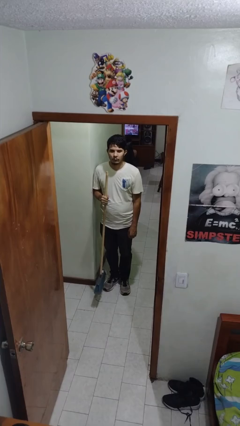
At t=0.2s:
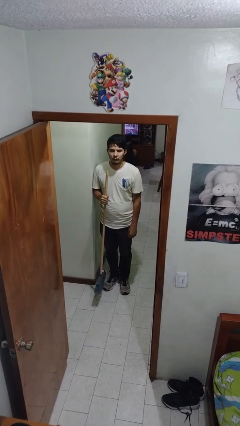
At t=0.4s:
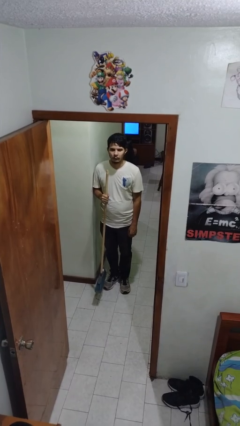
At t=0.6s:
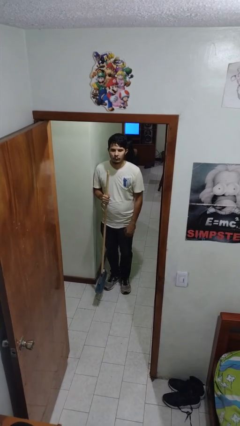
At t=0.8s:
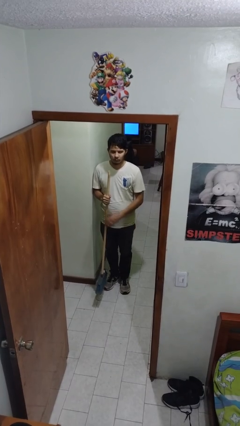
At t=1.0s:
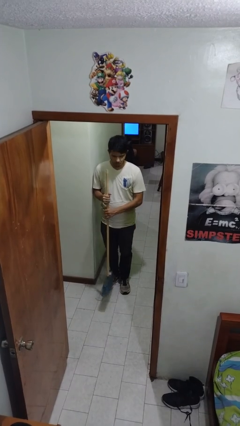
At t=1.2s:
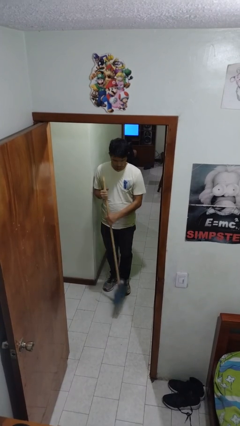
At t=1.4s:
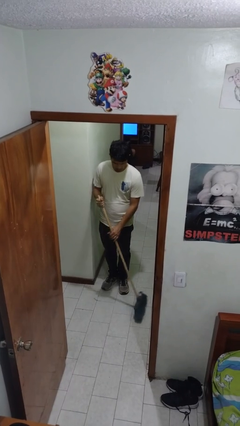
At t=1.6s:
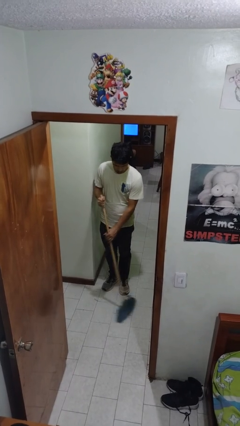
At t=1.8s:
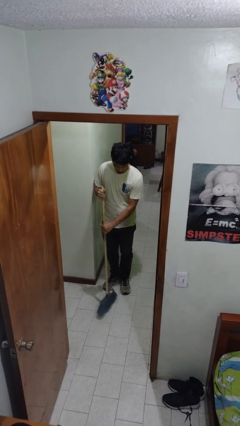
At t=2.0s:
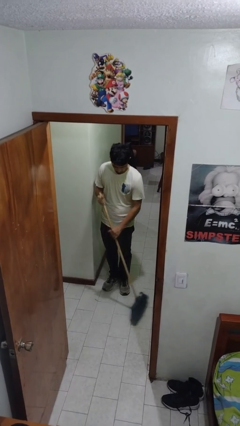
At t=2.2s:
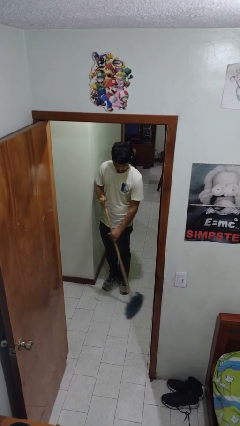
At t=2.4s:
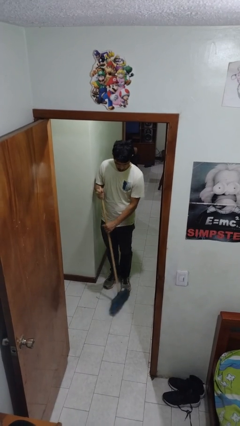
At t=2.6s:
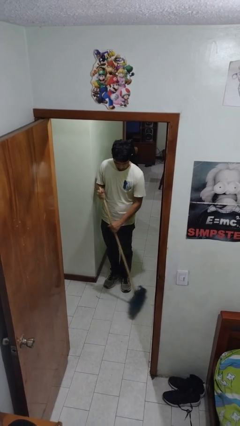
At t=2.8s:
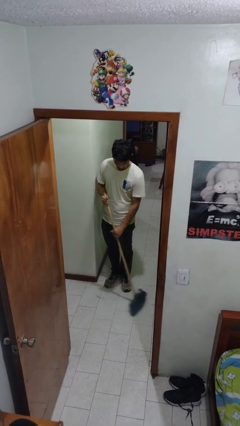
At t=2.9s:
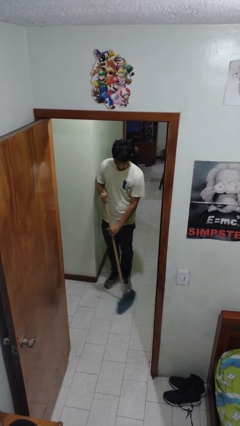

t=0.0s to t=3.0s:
person sweeps floor

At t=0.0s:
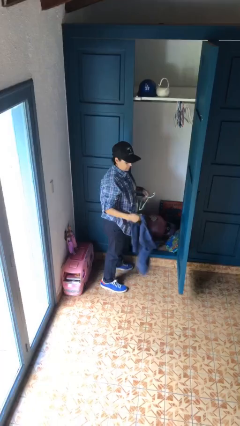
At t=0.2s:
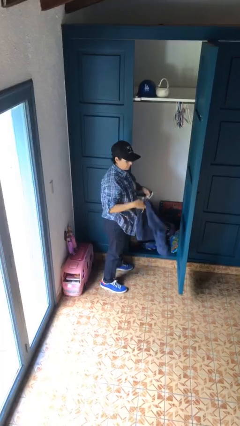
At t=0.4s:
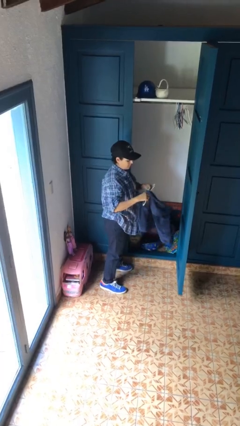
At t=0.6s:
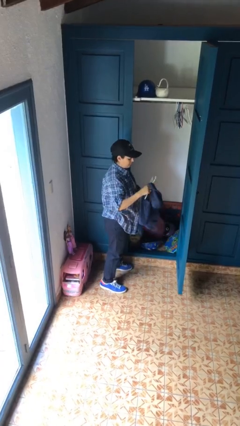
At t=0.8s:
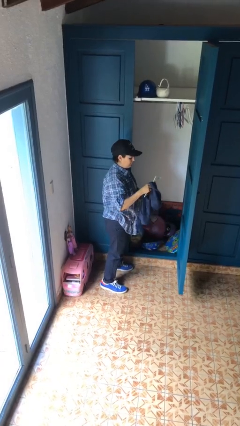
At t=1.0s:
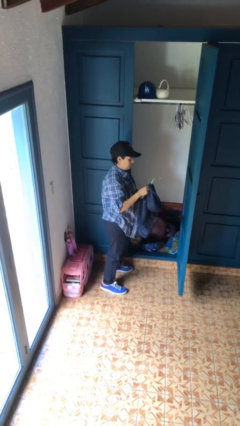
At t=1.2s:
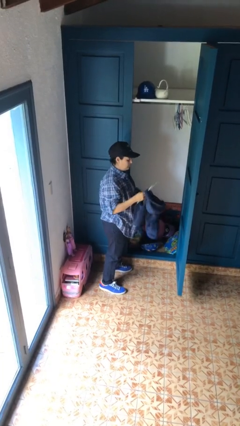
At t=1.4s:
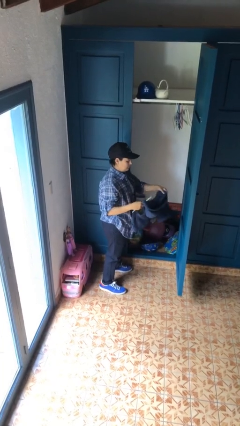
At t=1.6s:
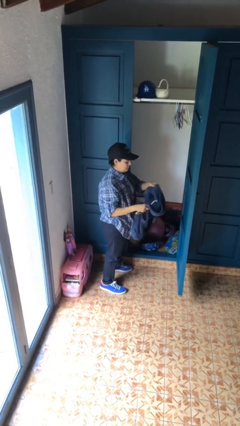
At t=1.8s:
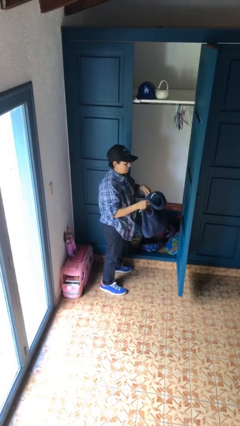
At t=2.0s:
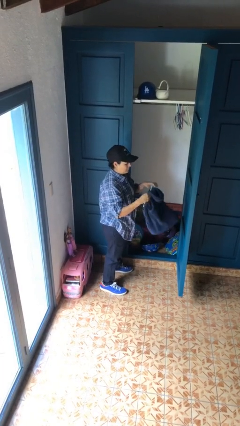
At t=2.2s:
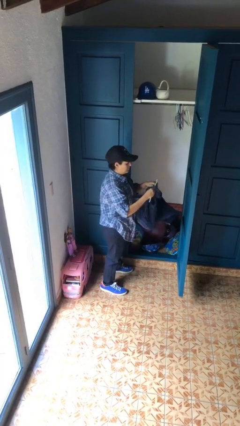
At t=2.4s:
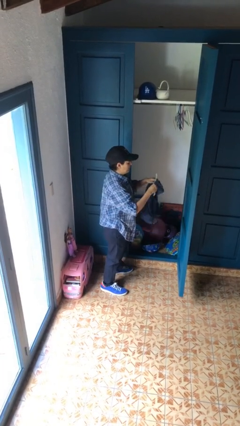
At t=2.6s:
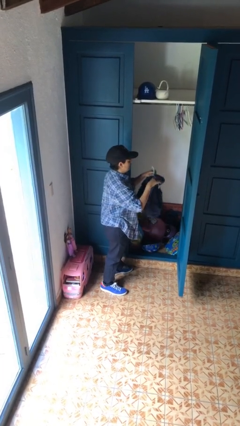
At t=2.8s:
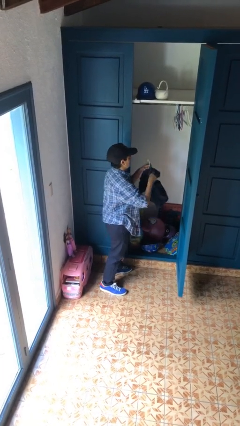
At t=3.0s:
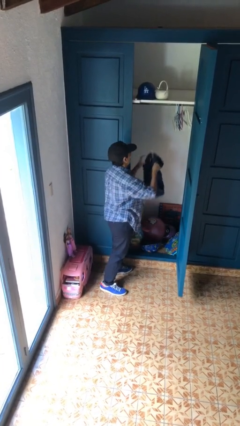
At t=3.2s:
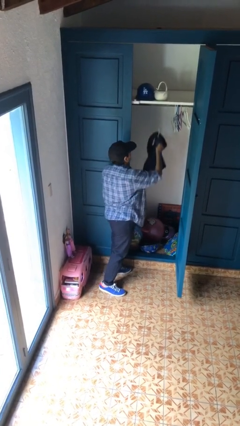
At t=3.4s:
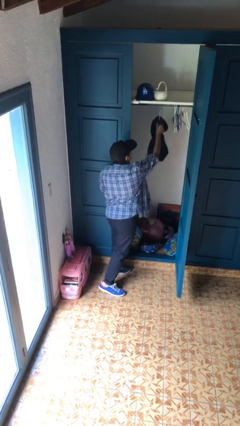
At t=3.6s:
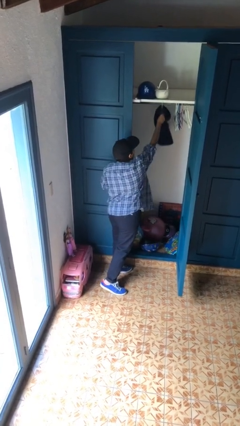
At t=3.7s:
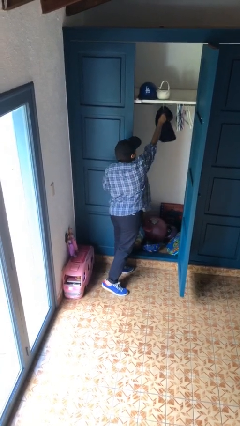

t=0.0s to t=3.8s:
person puts clothes into closet

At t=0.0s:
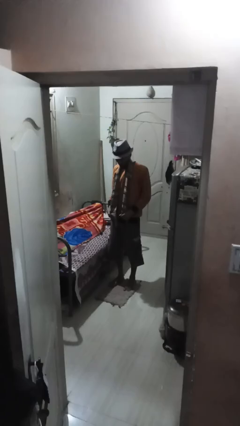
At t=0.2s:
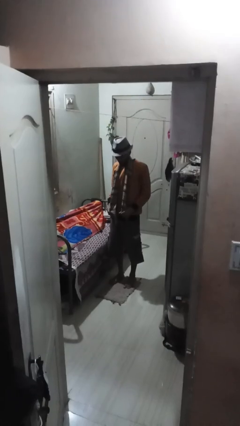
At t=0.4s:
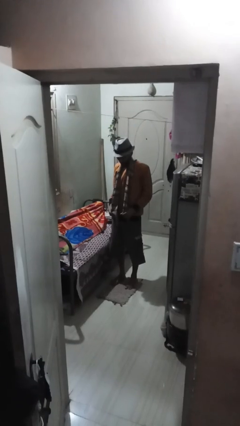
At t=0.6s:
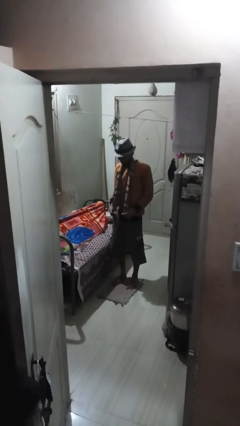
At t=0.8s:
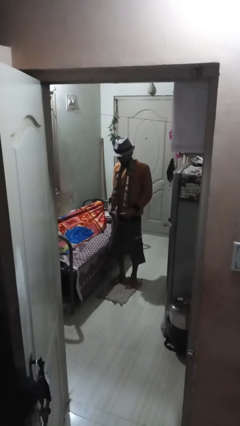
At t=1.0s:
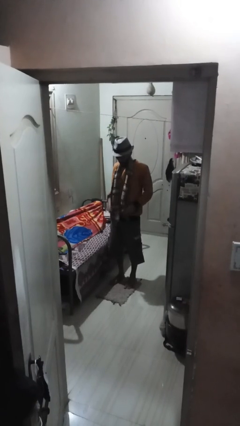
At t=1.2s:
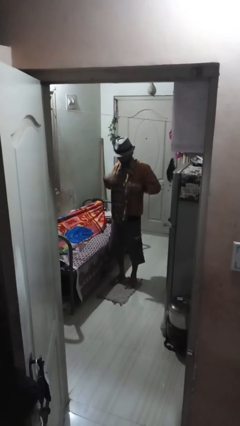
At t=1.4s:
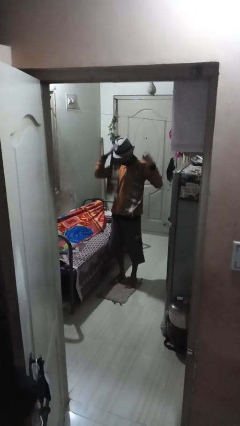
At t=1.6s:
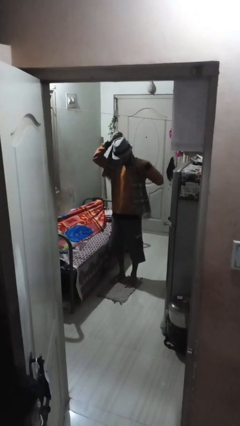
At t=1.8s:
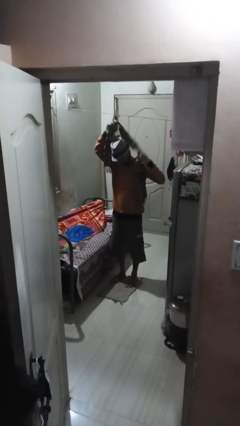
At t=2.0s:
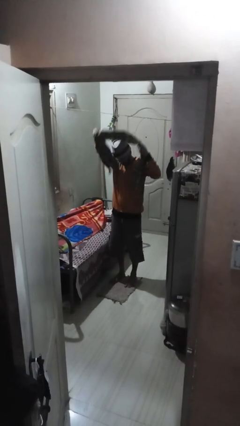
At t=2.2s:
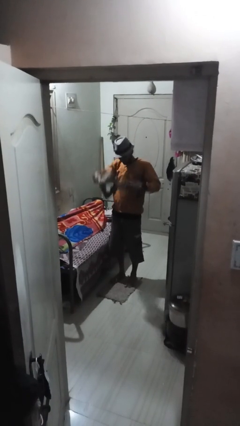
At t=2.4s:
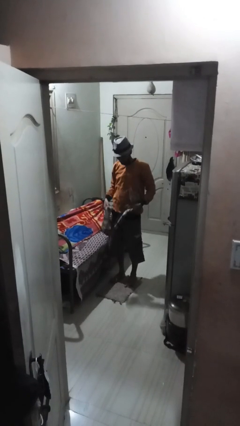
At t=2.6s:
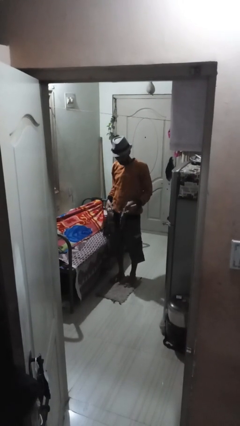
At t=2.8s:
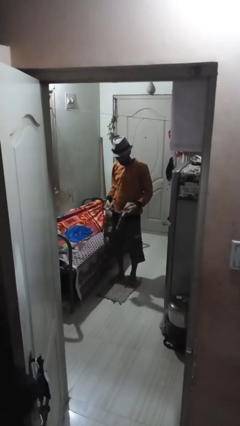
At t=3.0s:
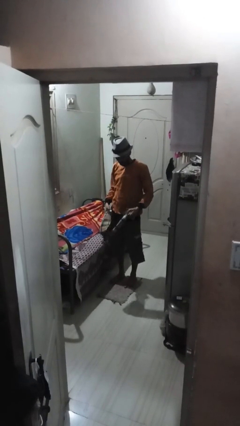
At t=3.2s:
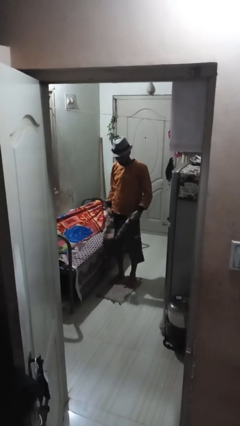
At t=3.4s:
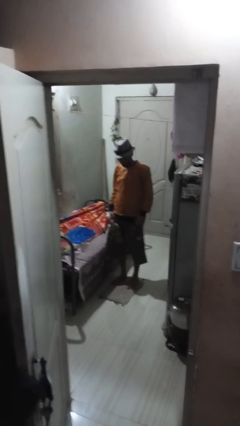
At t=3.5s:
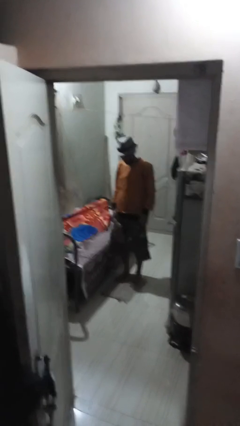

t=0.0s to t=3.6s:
person takes off scarf

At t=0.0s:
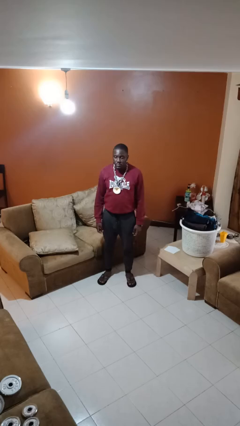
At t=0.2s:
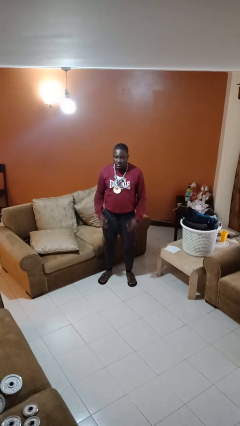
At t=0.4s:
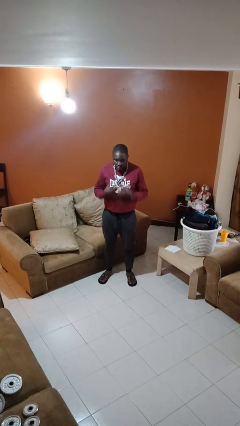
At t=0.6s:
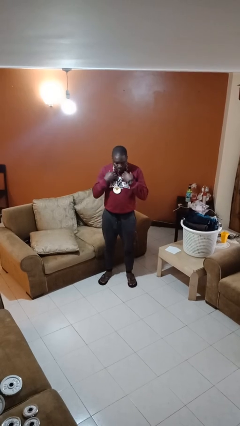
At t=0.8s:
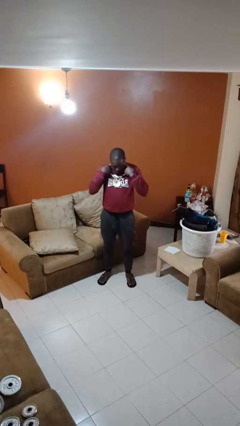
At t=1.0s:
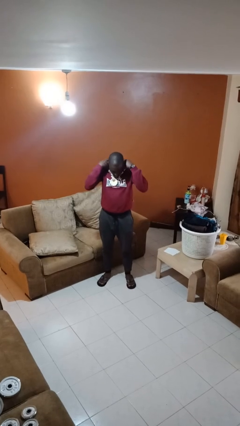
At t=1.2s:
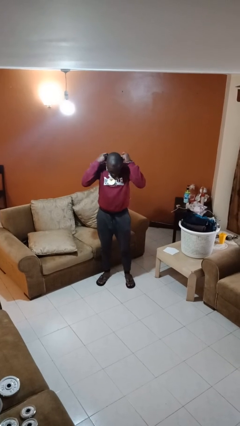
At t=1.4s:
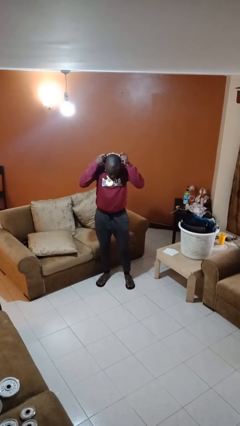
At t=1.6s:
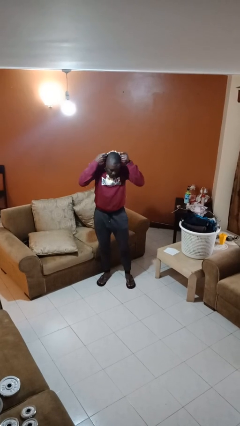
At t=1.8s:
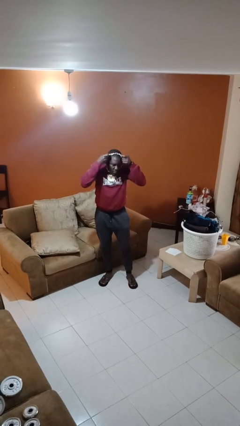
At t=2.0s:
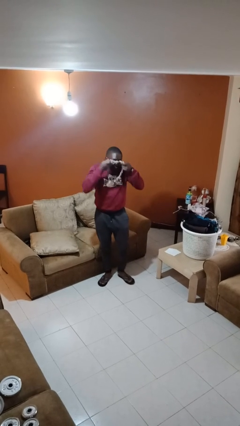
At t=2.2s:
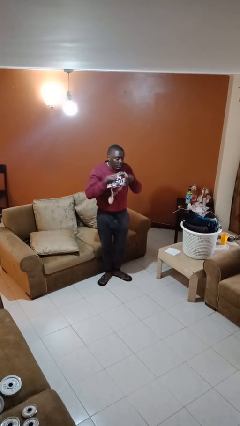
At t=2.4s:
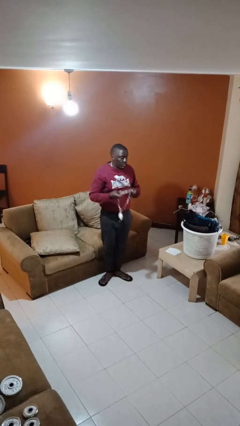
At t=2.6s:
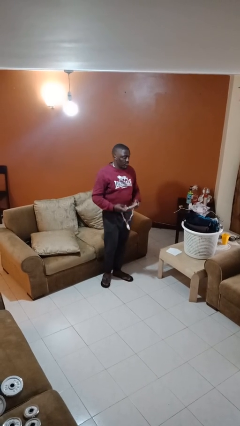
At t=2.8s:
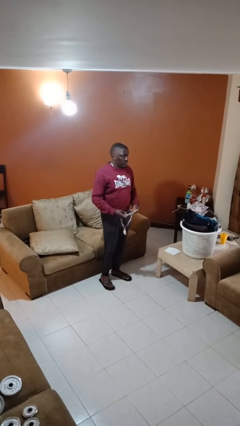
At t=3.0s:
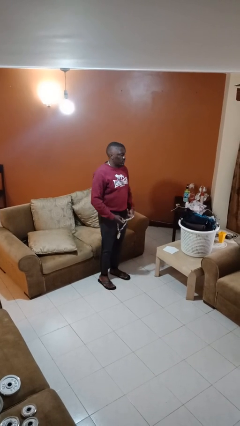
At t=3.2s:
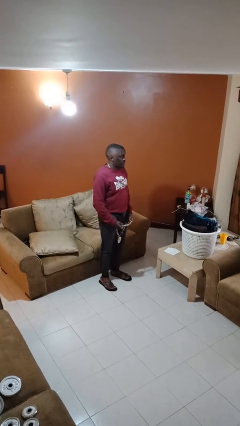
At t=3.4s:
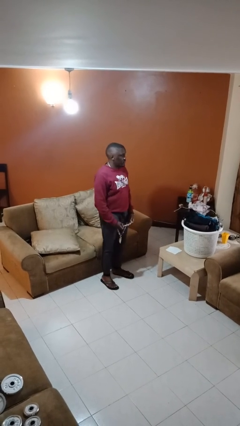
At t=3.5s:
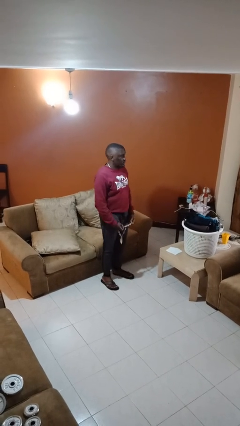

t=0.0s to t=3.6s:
person takes off necklace

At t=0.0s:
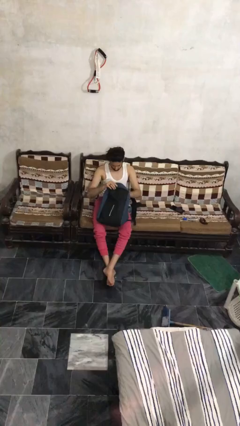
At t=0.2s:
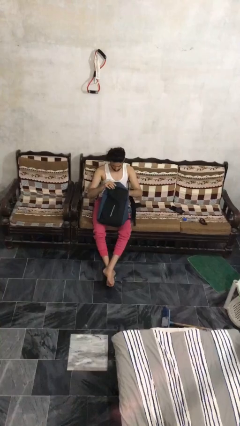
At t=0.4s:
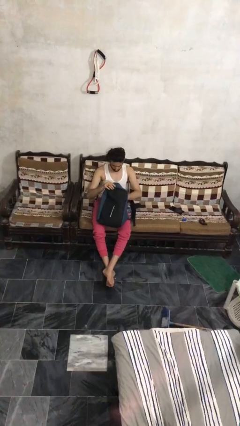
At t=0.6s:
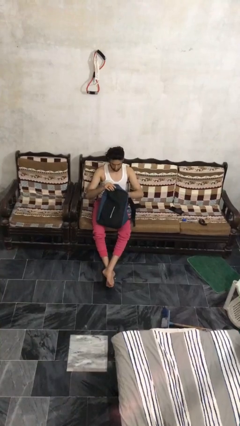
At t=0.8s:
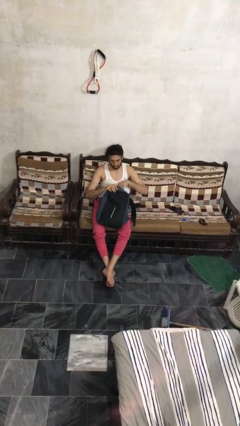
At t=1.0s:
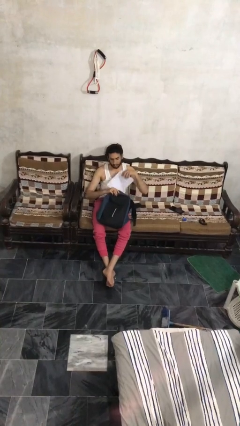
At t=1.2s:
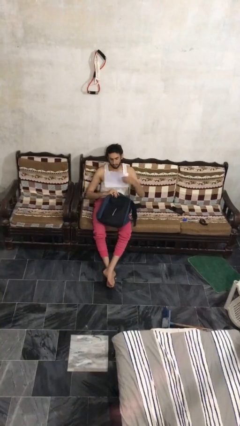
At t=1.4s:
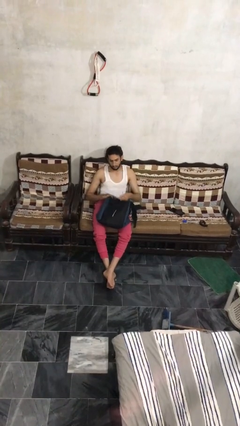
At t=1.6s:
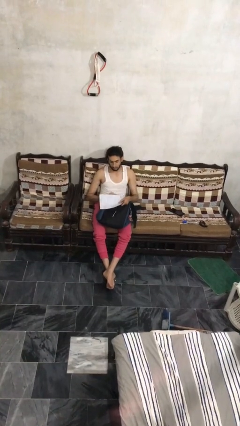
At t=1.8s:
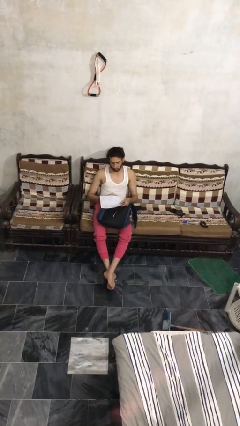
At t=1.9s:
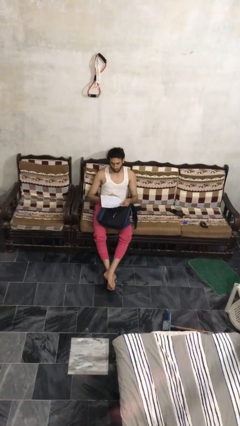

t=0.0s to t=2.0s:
person takes object from backpack

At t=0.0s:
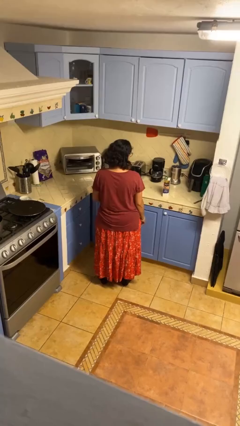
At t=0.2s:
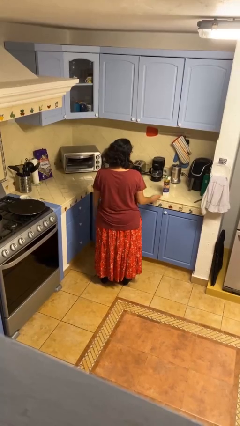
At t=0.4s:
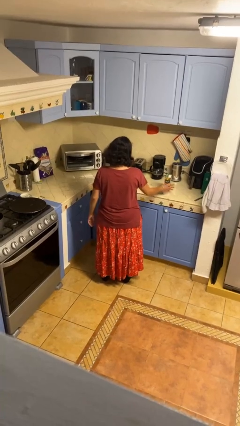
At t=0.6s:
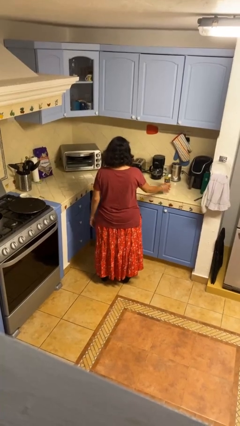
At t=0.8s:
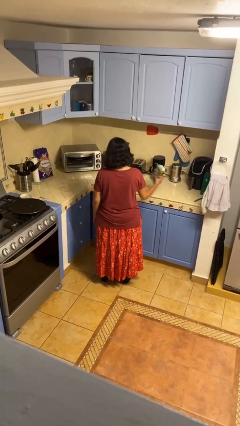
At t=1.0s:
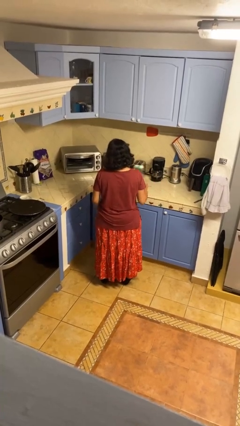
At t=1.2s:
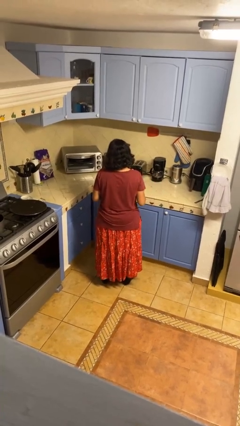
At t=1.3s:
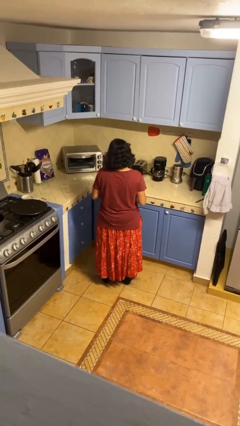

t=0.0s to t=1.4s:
person picks up object from countertop
